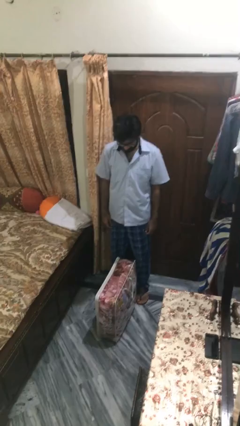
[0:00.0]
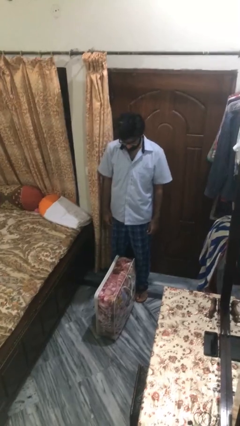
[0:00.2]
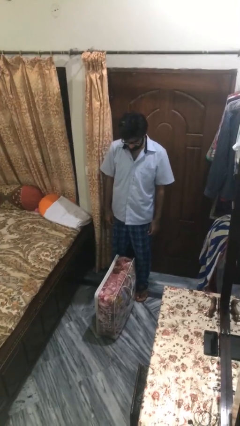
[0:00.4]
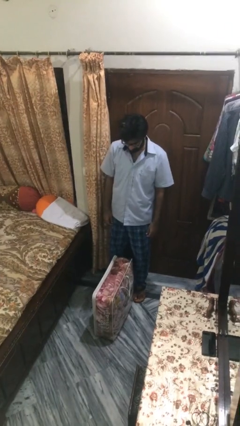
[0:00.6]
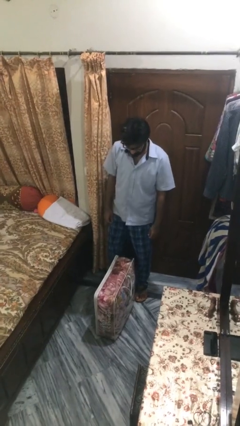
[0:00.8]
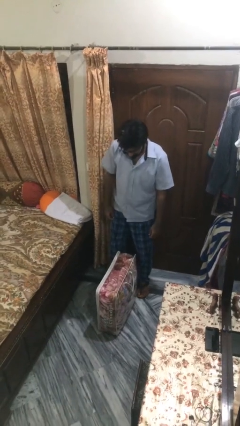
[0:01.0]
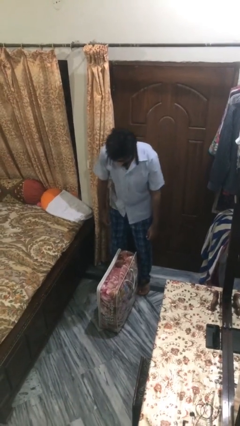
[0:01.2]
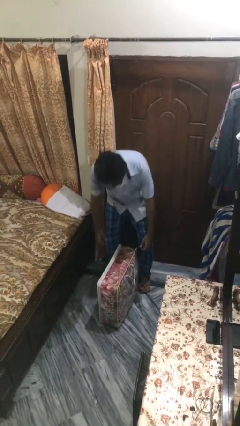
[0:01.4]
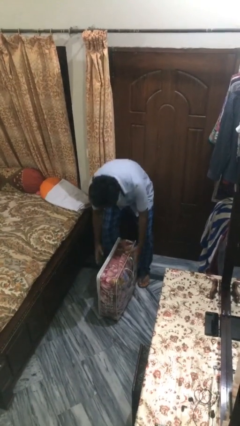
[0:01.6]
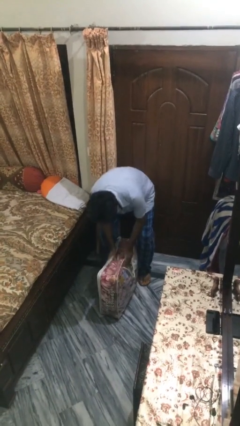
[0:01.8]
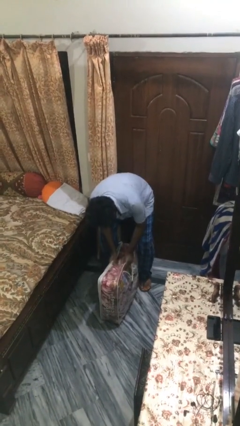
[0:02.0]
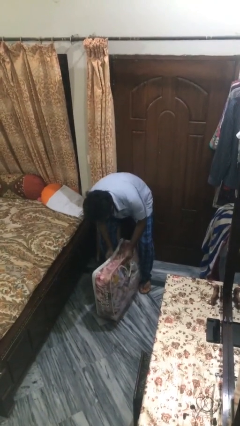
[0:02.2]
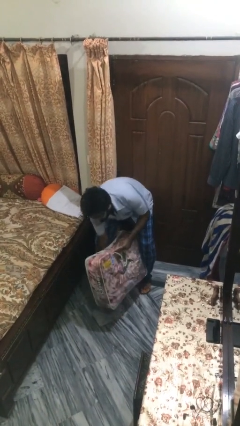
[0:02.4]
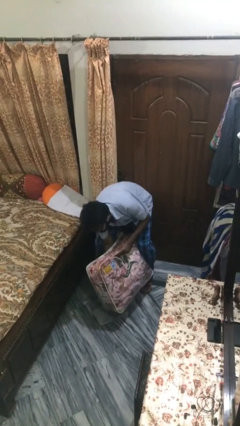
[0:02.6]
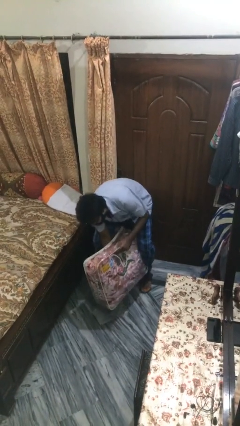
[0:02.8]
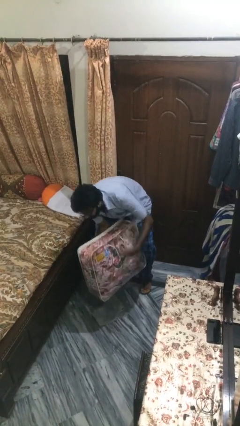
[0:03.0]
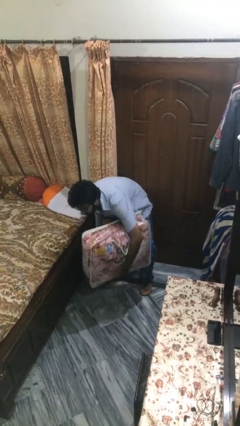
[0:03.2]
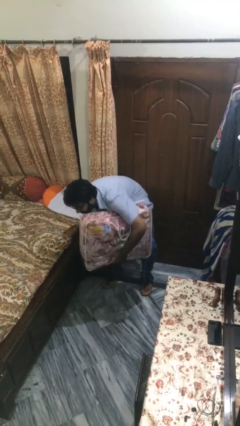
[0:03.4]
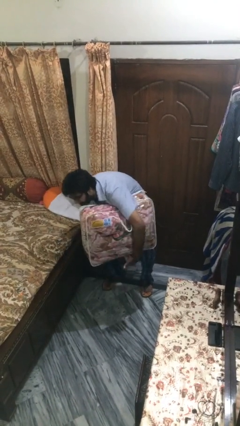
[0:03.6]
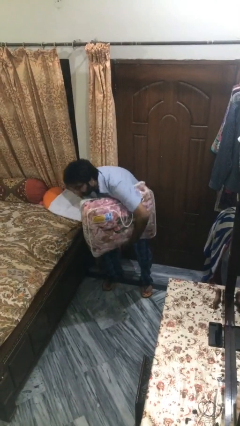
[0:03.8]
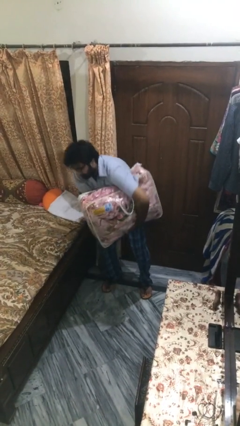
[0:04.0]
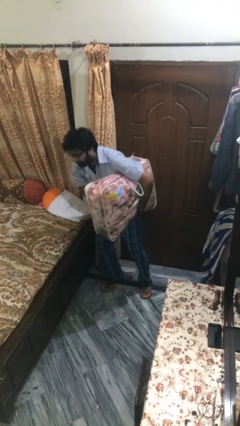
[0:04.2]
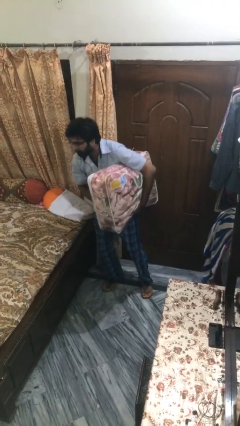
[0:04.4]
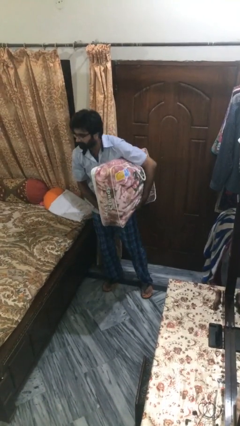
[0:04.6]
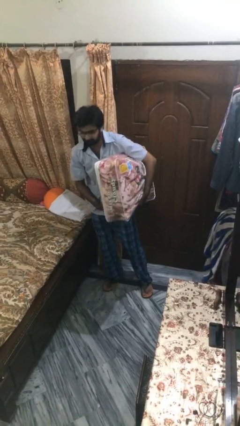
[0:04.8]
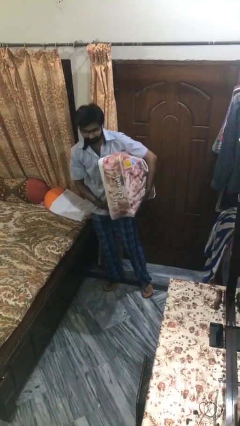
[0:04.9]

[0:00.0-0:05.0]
person picks up object from floor

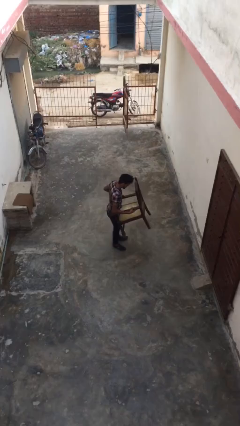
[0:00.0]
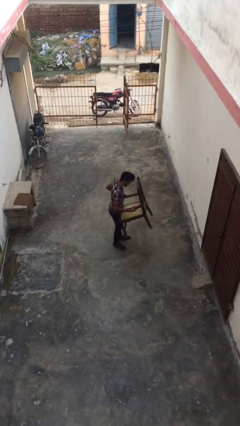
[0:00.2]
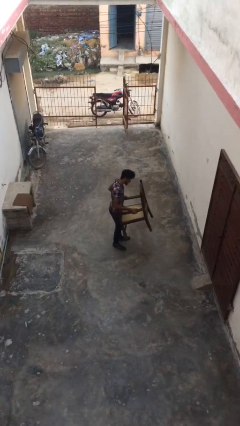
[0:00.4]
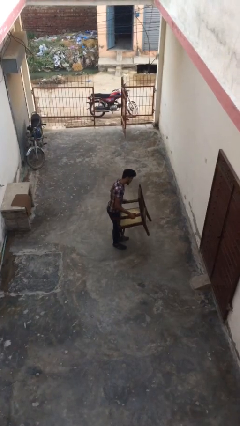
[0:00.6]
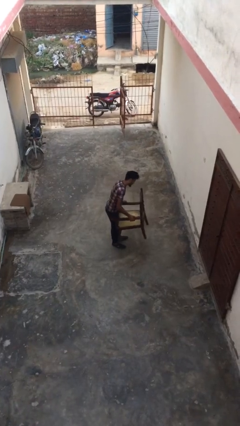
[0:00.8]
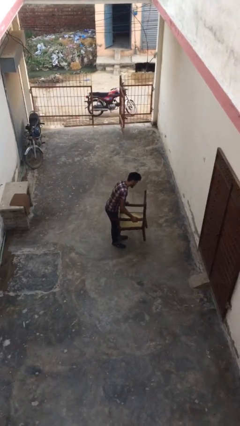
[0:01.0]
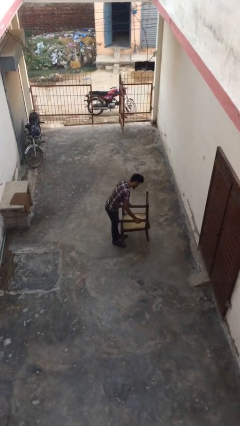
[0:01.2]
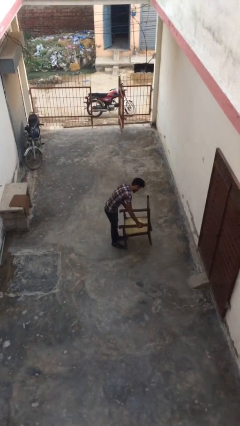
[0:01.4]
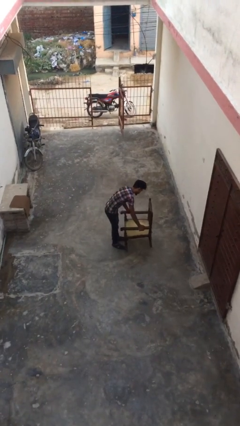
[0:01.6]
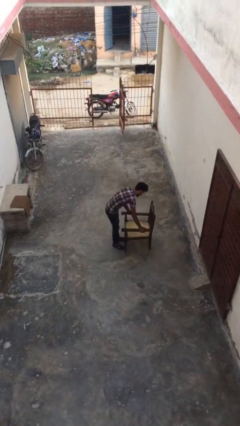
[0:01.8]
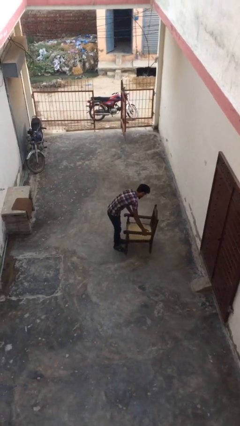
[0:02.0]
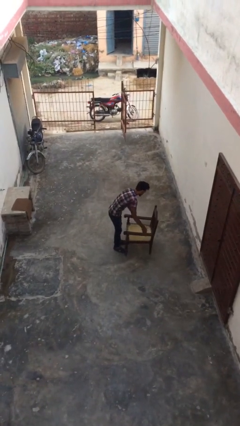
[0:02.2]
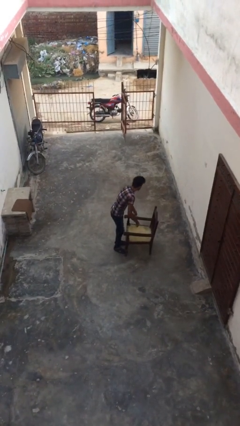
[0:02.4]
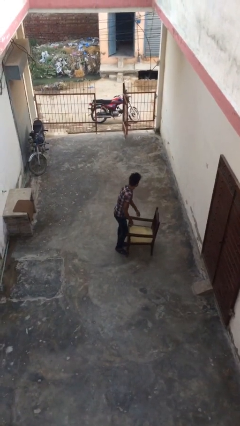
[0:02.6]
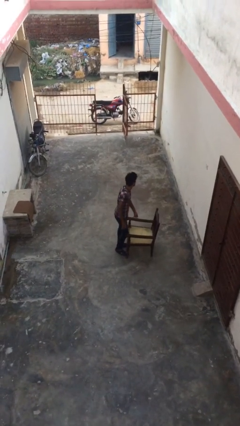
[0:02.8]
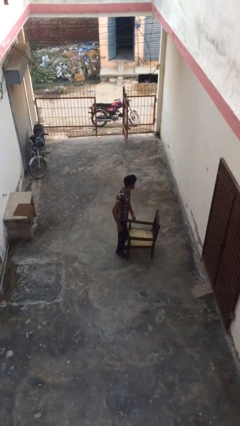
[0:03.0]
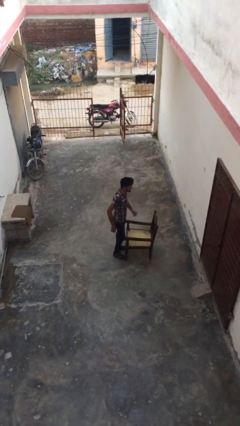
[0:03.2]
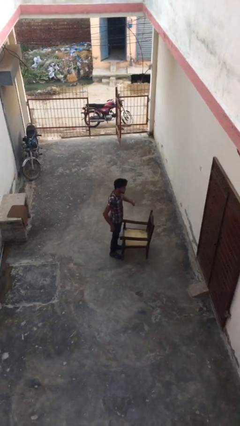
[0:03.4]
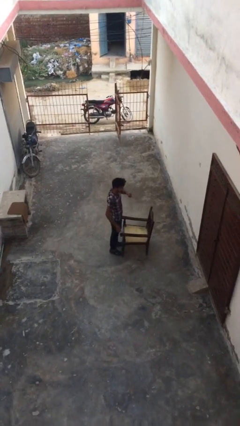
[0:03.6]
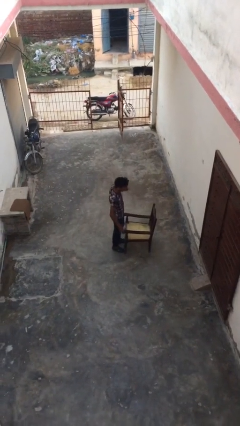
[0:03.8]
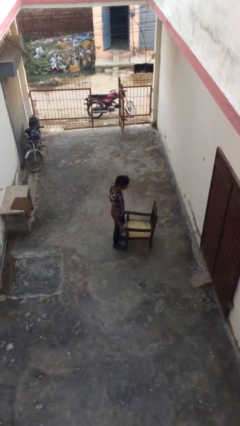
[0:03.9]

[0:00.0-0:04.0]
person puts down object on floor

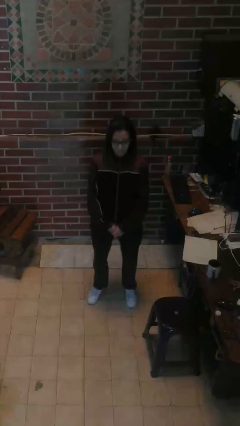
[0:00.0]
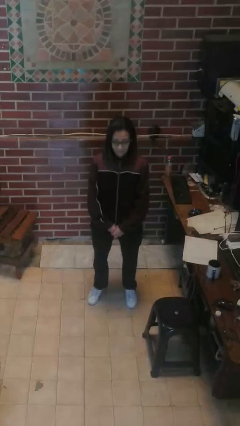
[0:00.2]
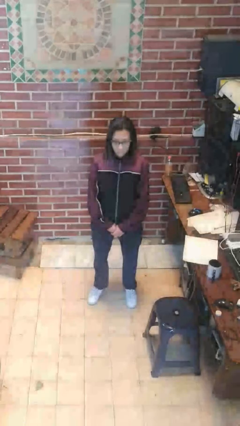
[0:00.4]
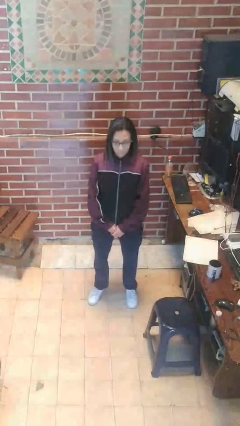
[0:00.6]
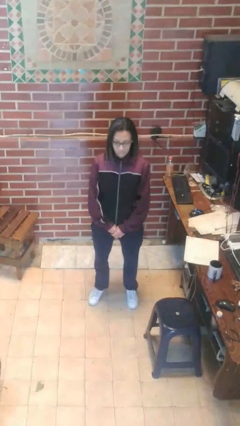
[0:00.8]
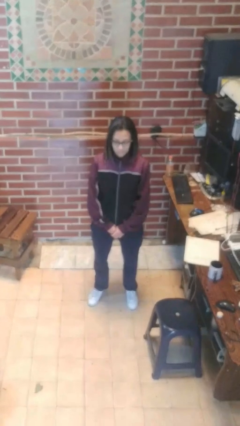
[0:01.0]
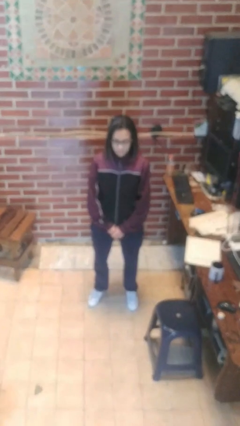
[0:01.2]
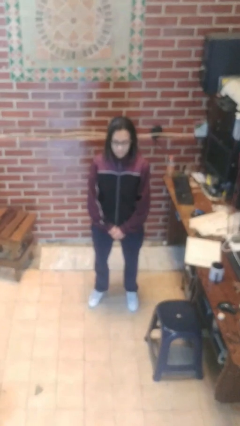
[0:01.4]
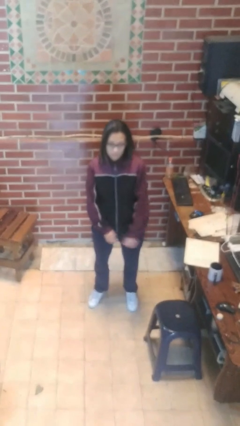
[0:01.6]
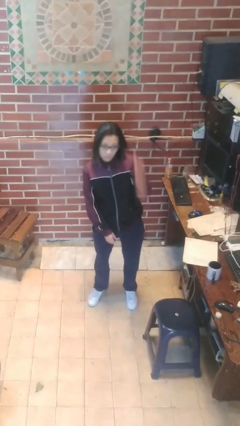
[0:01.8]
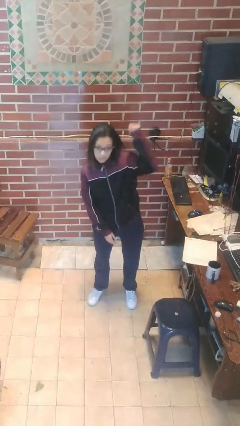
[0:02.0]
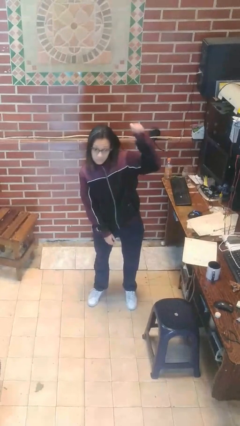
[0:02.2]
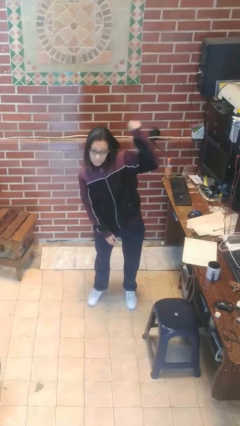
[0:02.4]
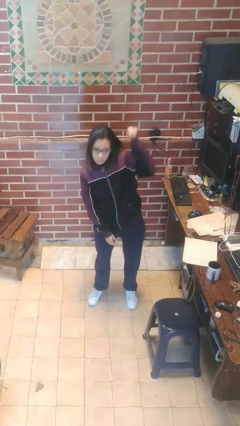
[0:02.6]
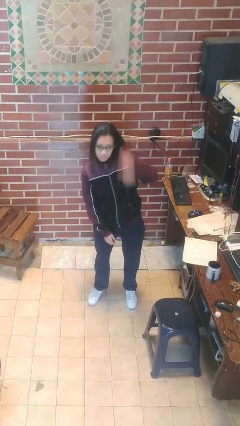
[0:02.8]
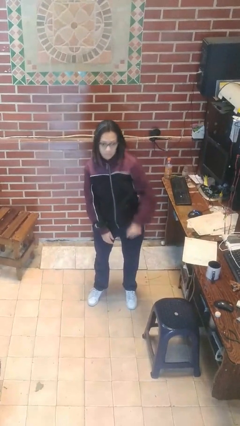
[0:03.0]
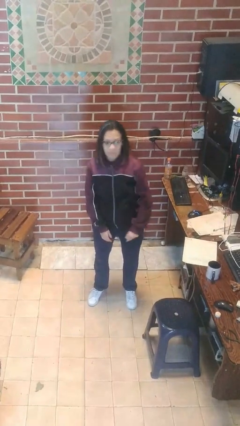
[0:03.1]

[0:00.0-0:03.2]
person gestures behind me

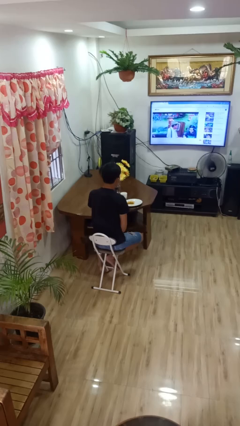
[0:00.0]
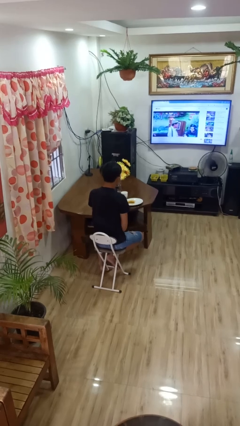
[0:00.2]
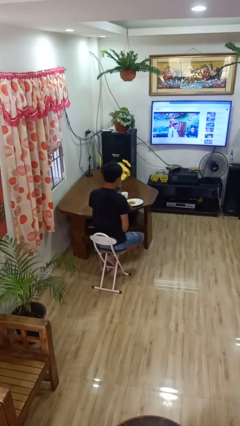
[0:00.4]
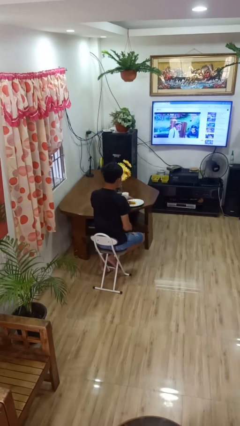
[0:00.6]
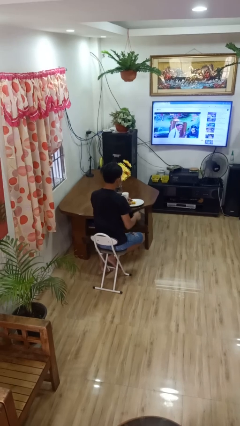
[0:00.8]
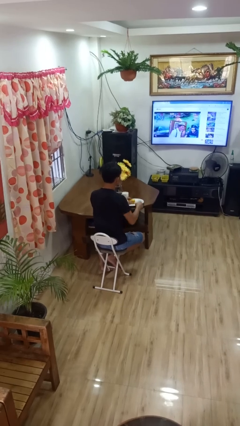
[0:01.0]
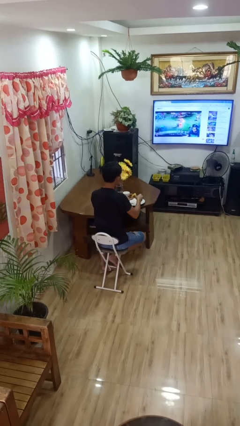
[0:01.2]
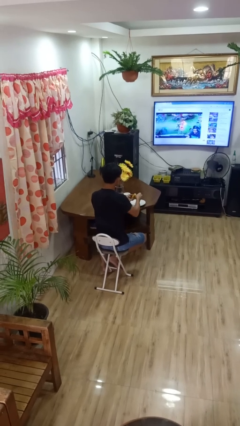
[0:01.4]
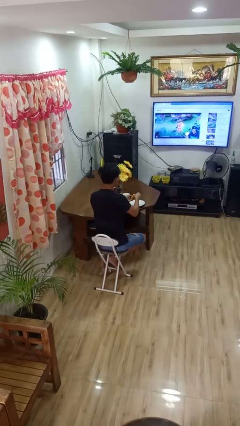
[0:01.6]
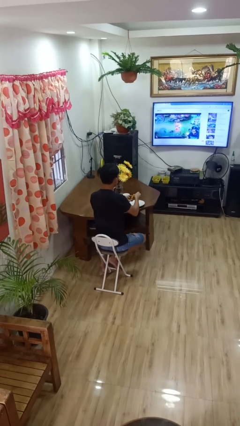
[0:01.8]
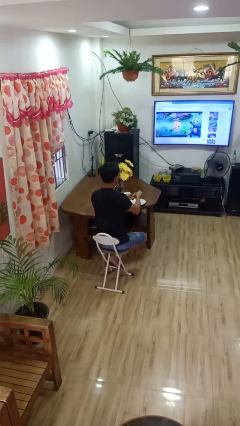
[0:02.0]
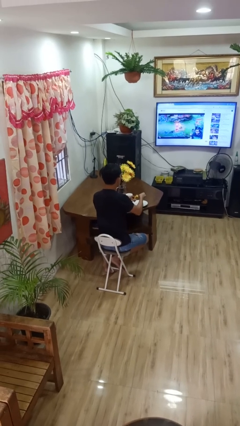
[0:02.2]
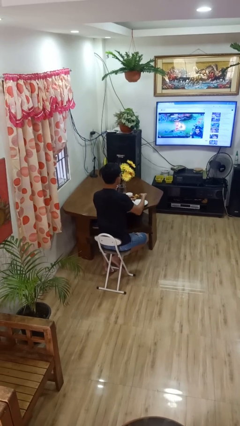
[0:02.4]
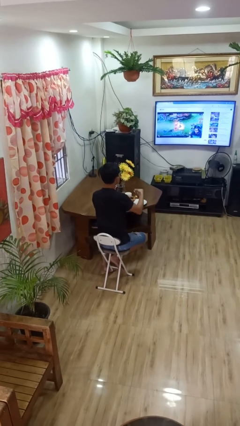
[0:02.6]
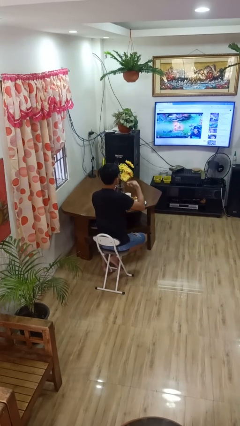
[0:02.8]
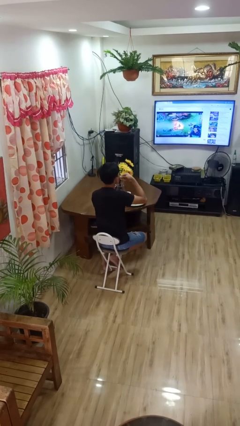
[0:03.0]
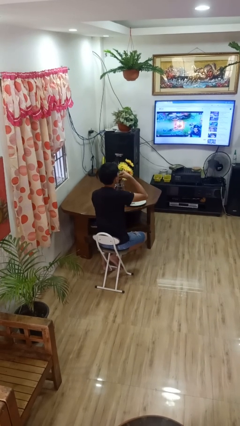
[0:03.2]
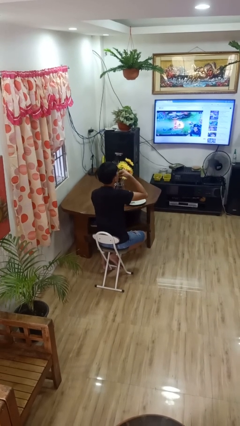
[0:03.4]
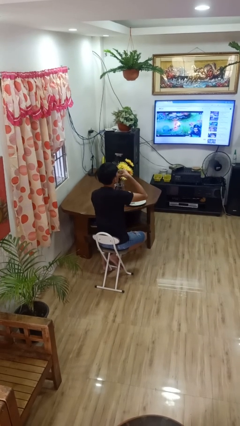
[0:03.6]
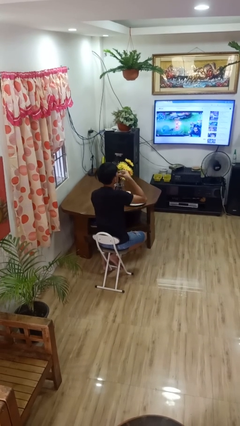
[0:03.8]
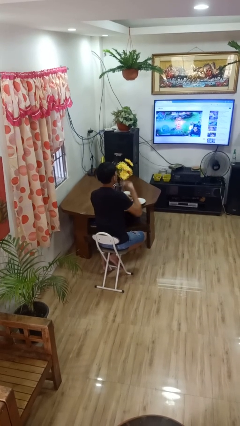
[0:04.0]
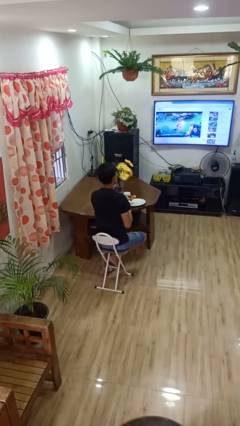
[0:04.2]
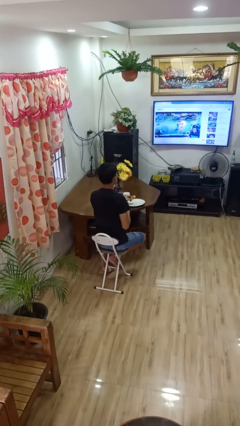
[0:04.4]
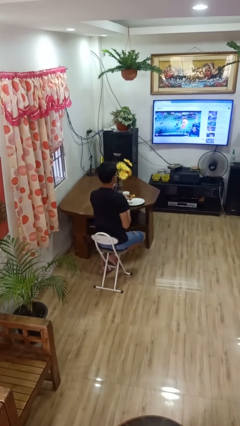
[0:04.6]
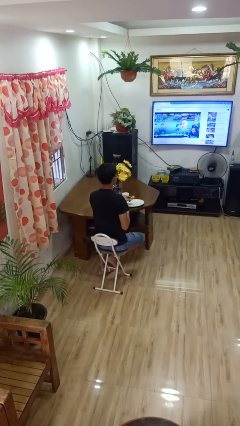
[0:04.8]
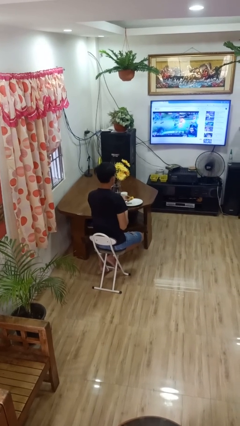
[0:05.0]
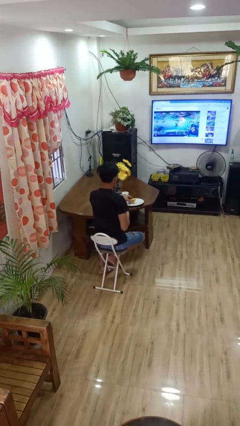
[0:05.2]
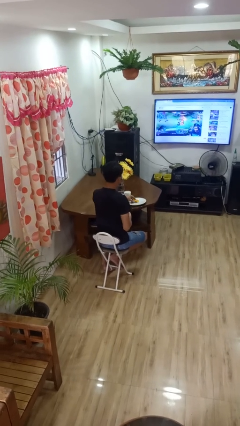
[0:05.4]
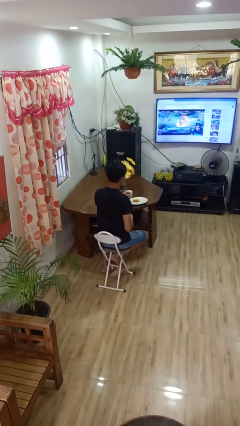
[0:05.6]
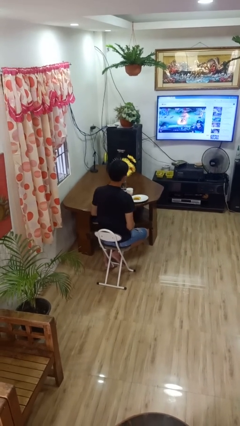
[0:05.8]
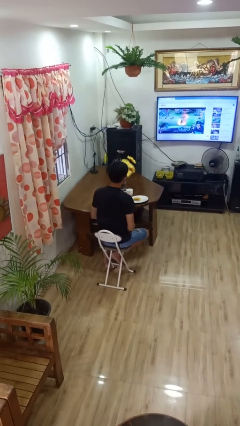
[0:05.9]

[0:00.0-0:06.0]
person eats with hands
